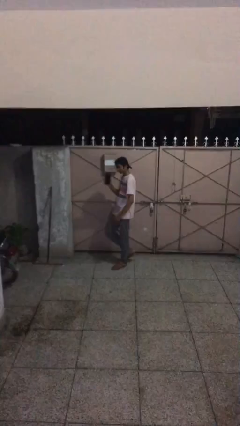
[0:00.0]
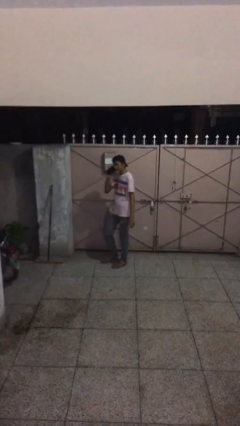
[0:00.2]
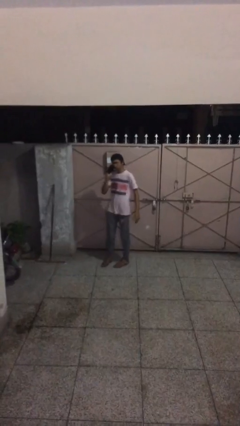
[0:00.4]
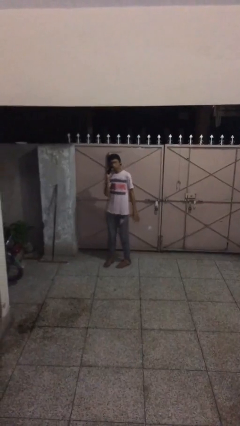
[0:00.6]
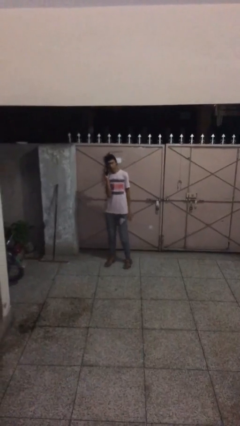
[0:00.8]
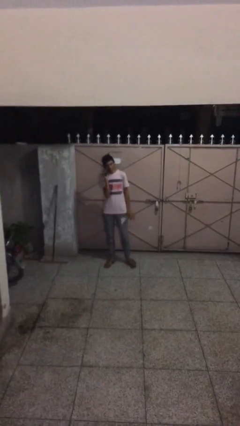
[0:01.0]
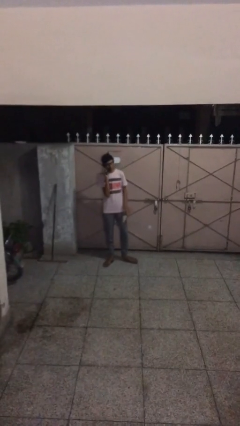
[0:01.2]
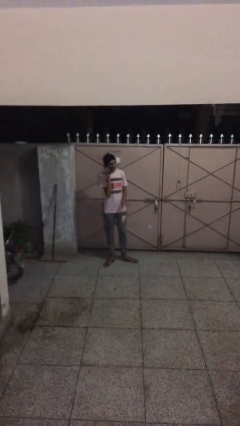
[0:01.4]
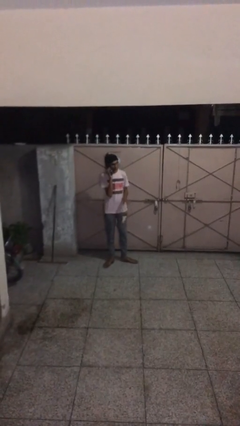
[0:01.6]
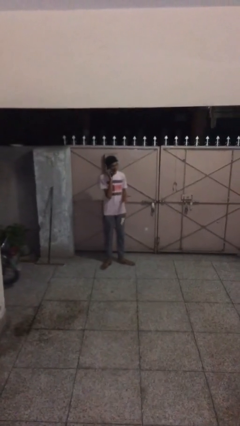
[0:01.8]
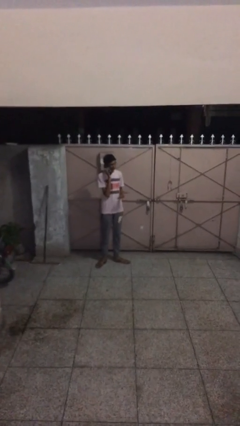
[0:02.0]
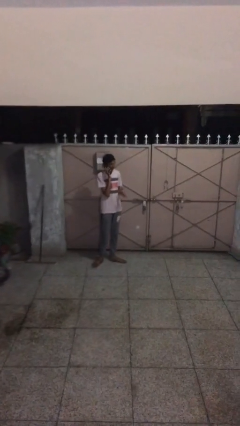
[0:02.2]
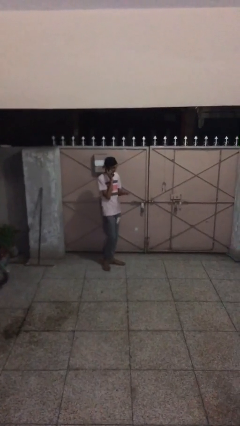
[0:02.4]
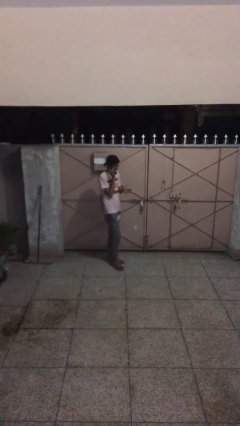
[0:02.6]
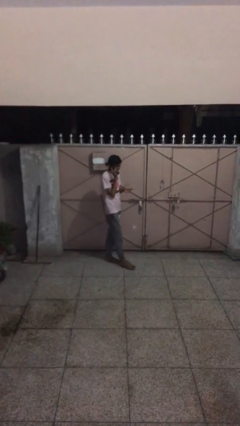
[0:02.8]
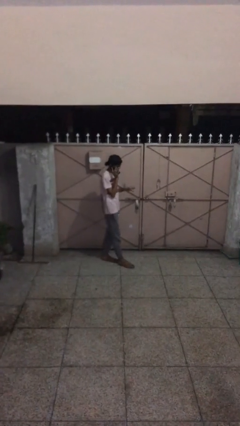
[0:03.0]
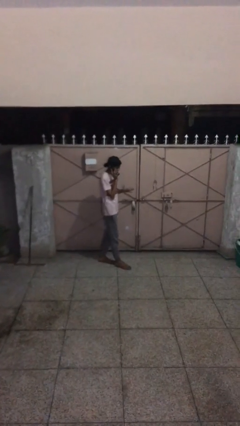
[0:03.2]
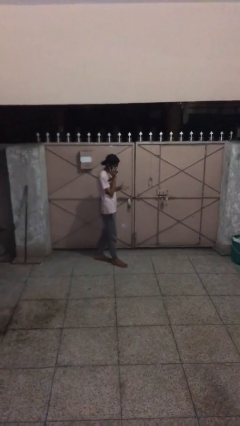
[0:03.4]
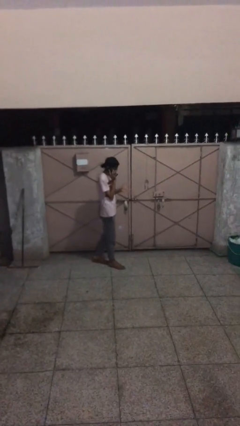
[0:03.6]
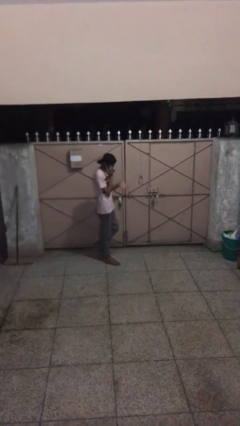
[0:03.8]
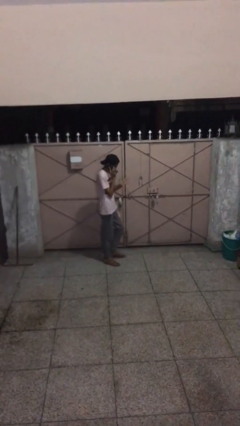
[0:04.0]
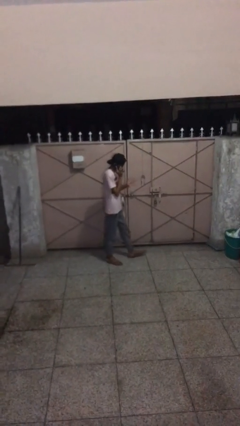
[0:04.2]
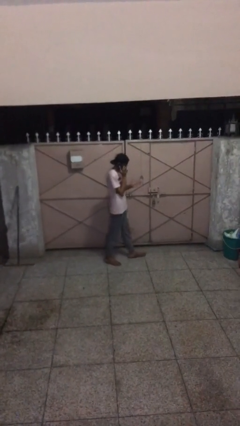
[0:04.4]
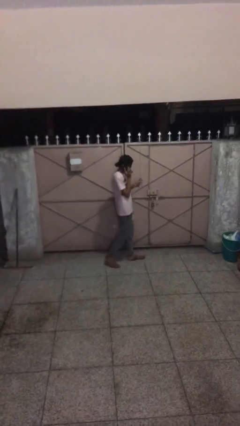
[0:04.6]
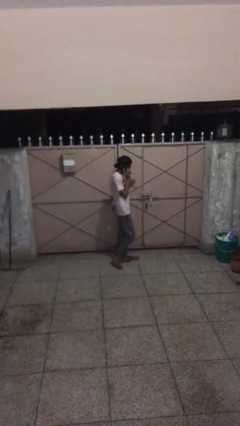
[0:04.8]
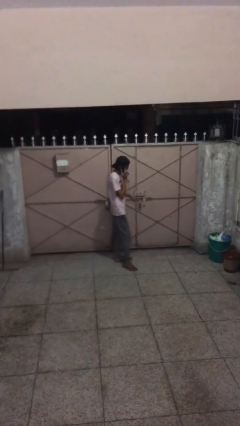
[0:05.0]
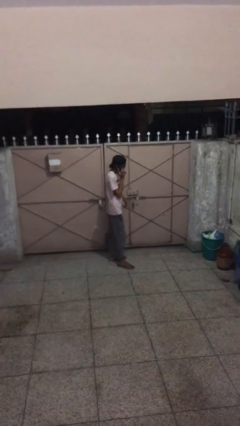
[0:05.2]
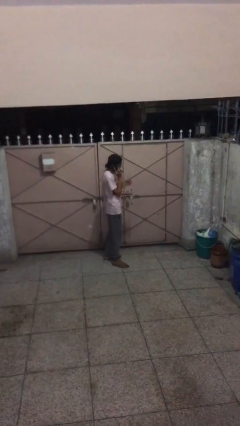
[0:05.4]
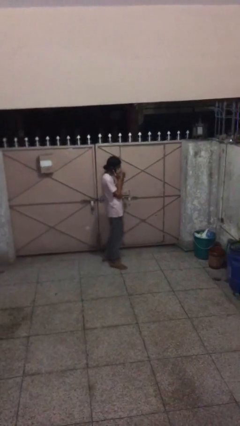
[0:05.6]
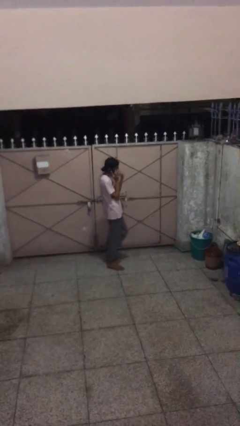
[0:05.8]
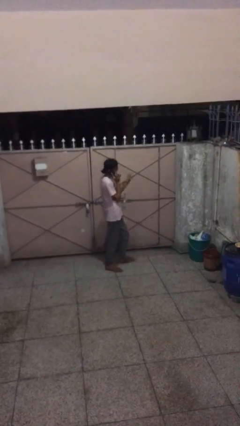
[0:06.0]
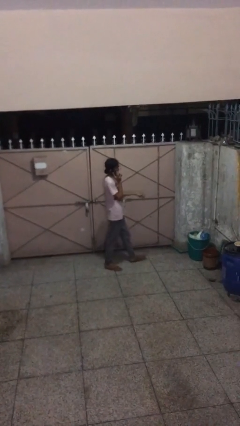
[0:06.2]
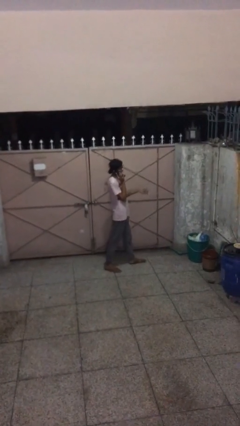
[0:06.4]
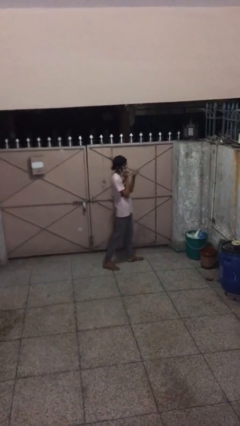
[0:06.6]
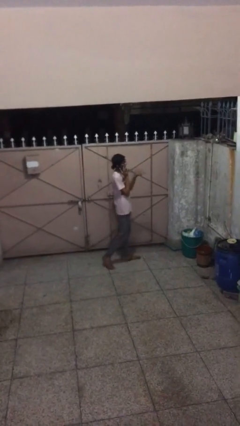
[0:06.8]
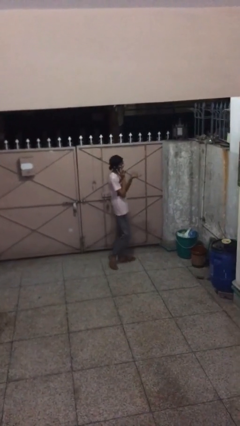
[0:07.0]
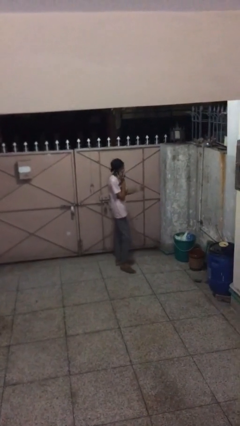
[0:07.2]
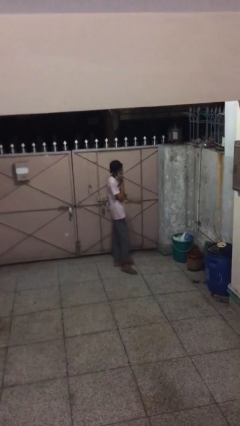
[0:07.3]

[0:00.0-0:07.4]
person talks on phone

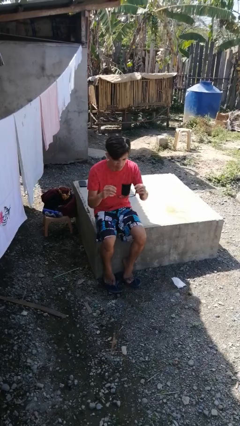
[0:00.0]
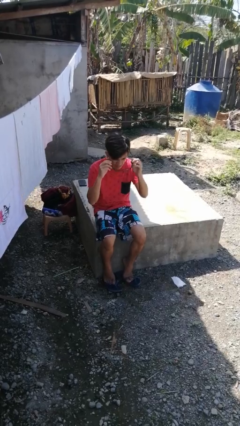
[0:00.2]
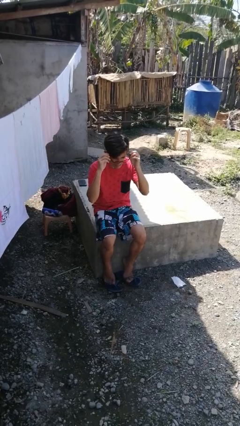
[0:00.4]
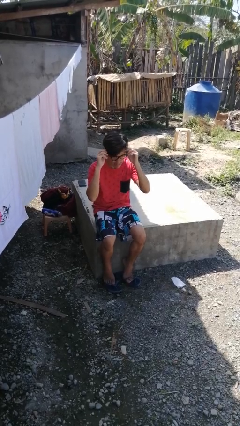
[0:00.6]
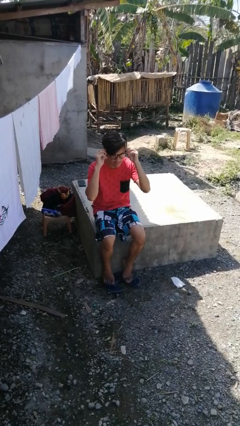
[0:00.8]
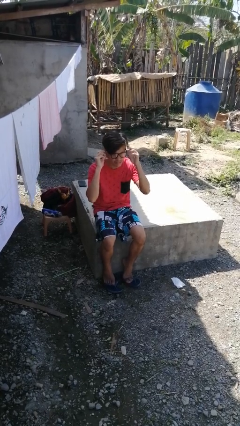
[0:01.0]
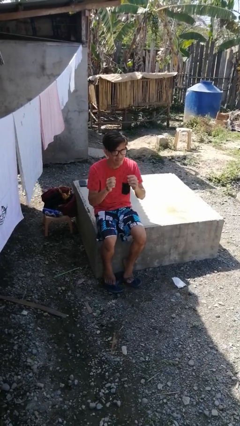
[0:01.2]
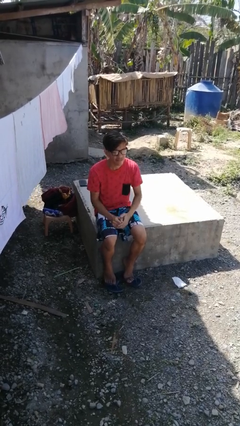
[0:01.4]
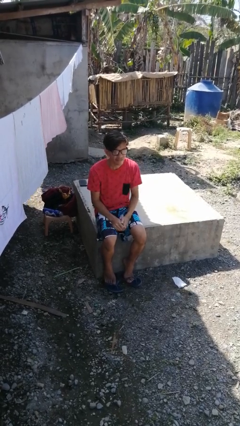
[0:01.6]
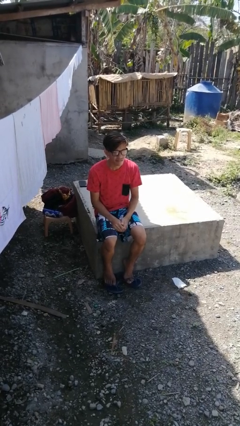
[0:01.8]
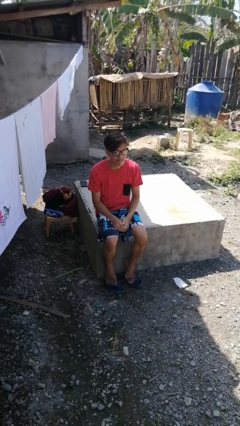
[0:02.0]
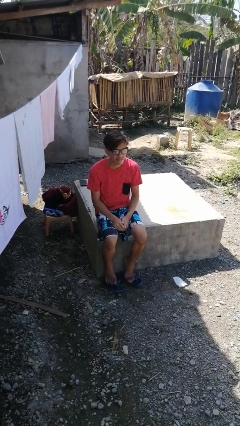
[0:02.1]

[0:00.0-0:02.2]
person puts on glasses

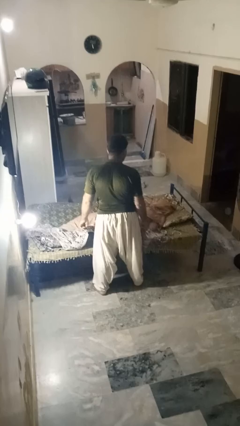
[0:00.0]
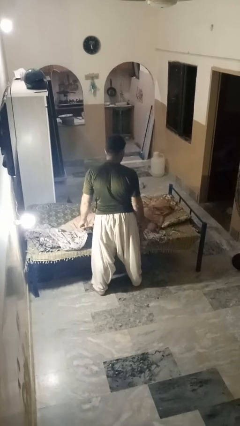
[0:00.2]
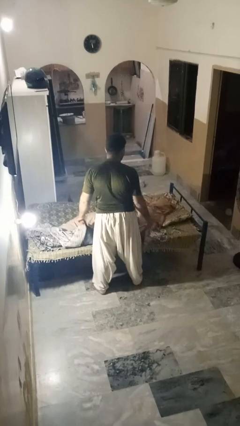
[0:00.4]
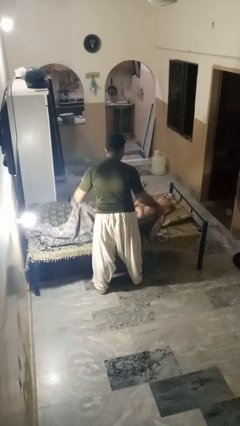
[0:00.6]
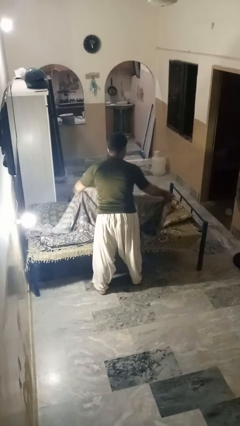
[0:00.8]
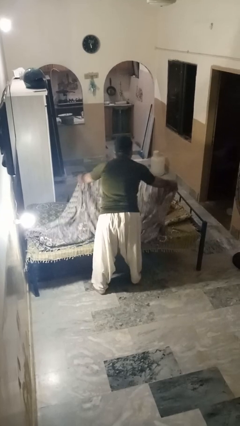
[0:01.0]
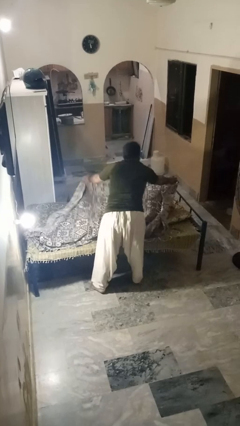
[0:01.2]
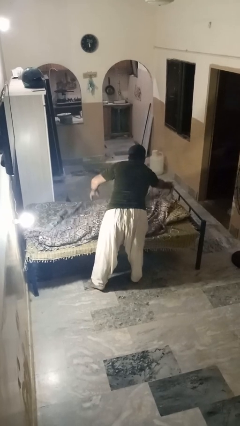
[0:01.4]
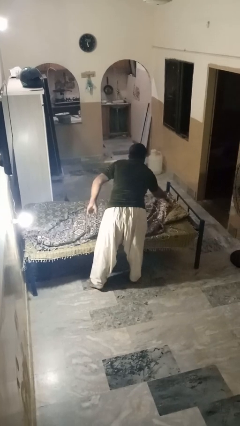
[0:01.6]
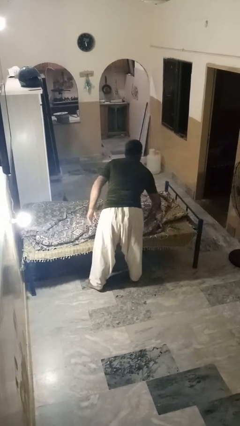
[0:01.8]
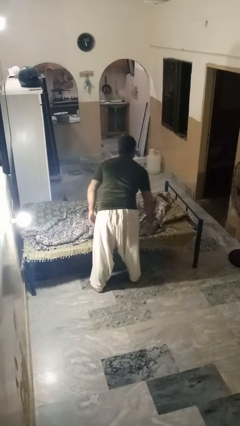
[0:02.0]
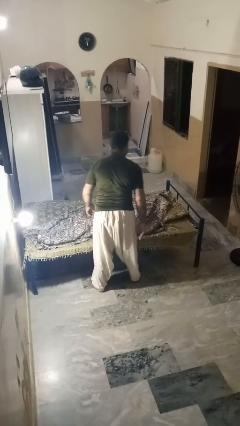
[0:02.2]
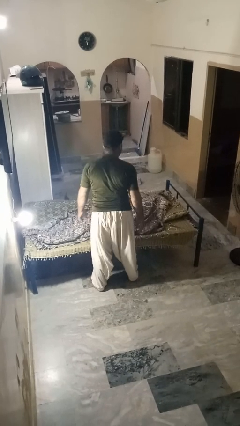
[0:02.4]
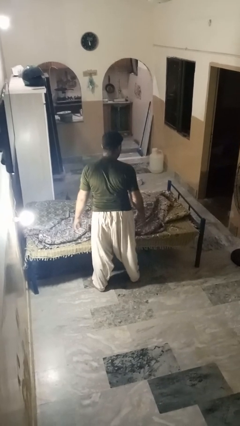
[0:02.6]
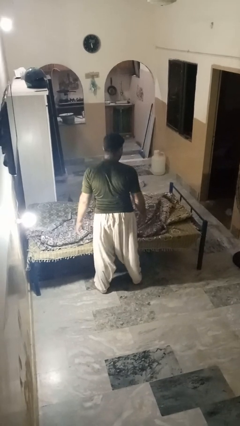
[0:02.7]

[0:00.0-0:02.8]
person covers friend with blanket

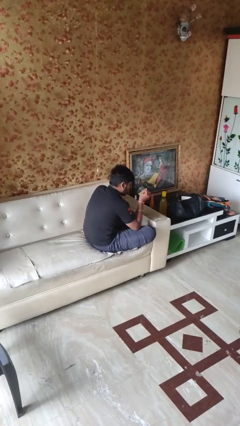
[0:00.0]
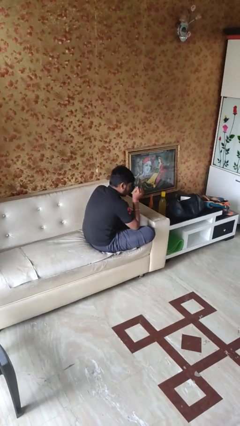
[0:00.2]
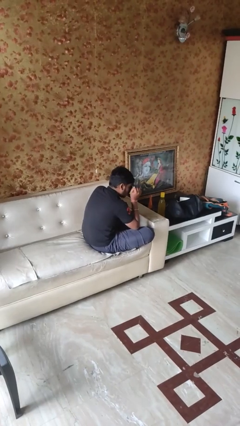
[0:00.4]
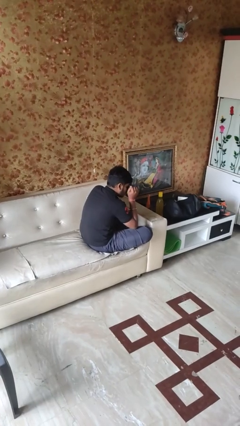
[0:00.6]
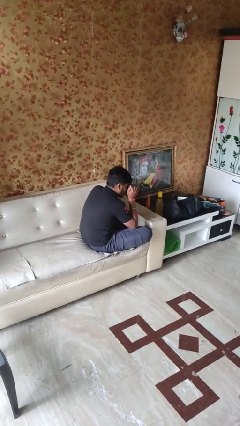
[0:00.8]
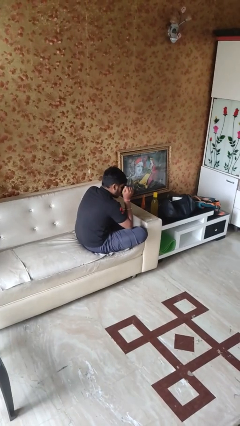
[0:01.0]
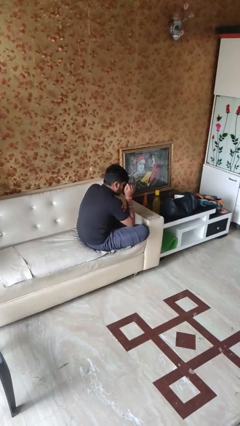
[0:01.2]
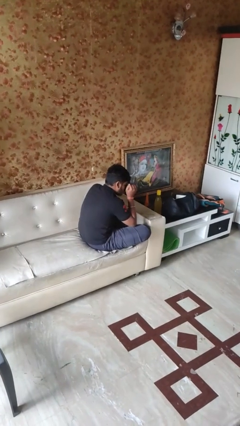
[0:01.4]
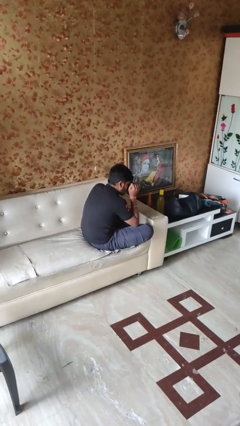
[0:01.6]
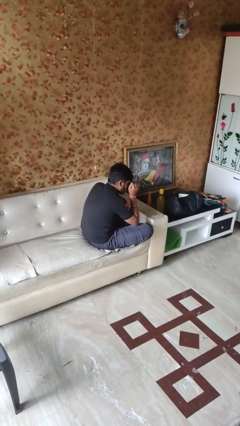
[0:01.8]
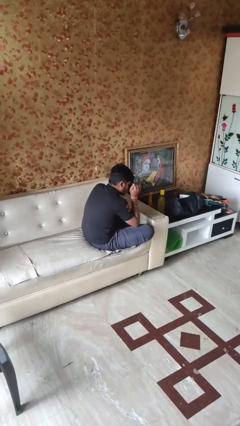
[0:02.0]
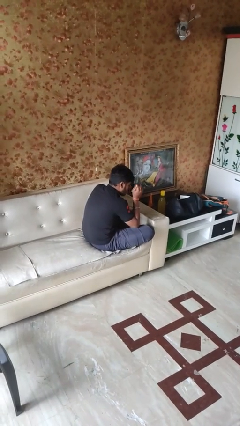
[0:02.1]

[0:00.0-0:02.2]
person drinks from mug

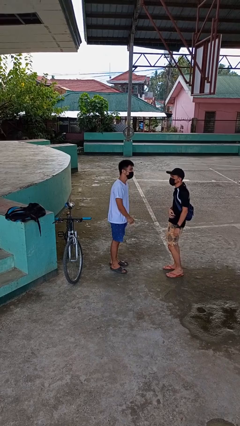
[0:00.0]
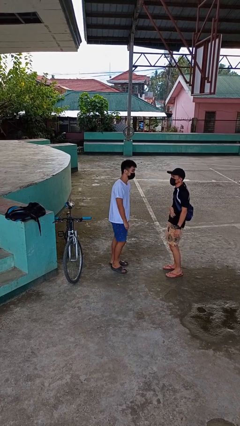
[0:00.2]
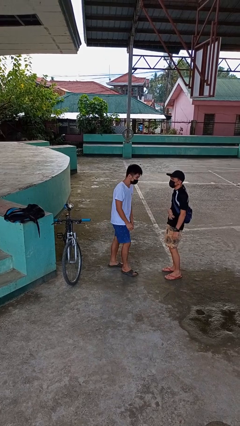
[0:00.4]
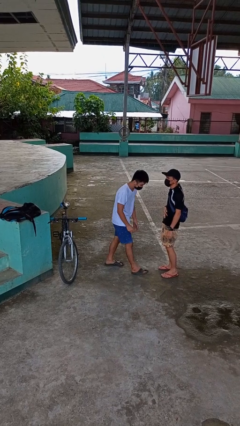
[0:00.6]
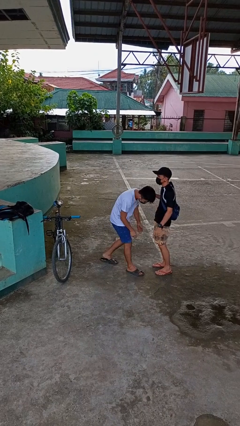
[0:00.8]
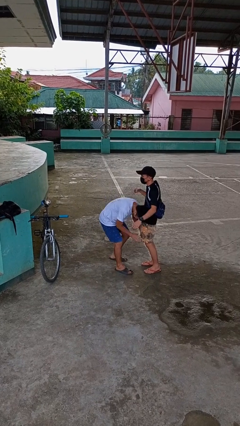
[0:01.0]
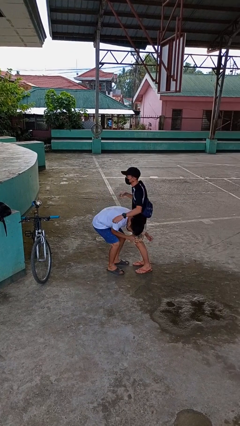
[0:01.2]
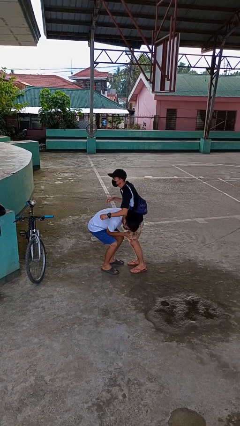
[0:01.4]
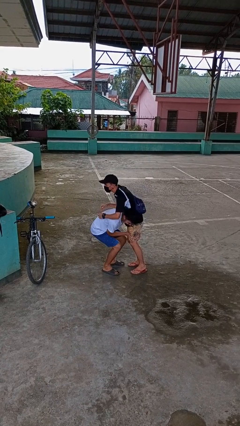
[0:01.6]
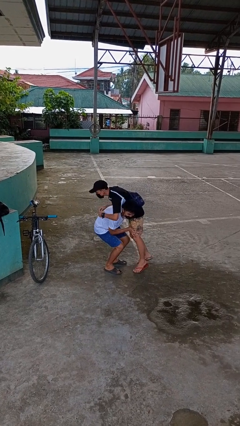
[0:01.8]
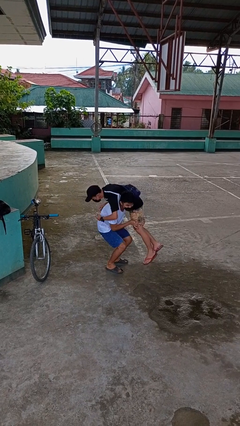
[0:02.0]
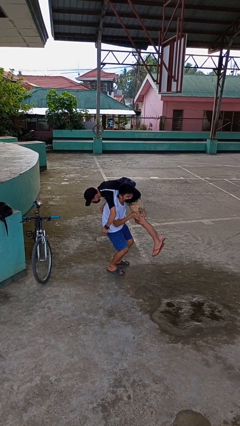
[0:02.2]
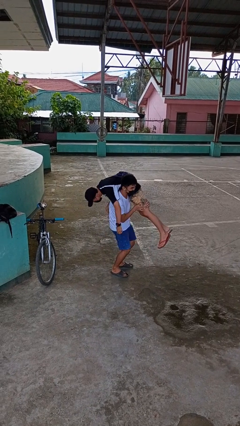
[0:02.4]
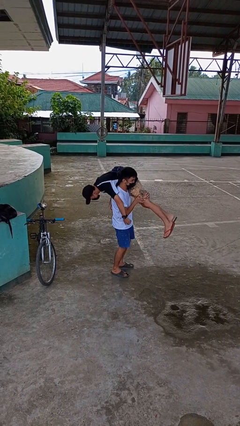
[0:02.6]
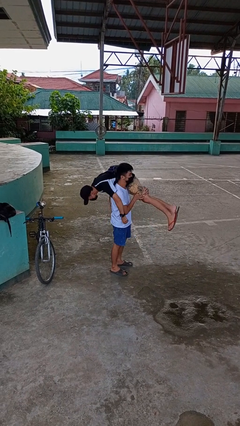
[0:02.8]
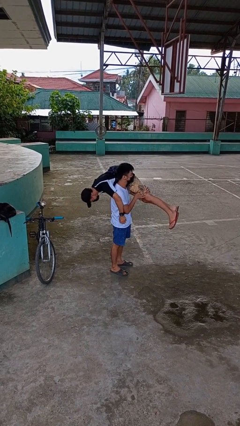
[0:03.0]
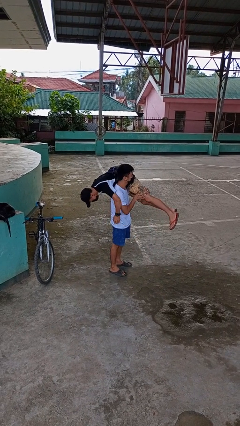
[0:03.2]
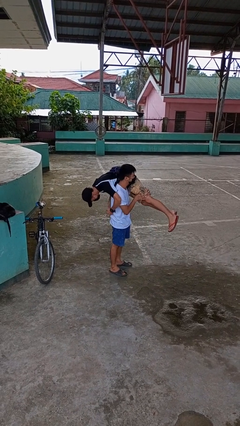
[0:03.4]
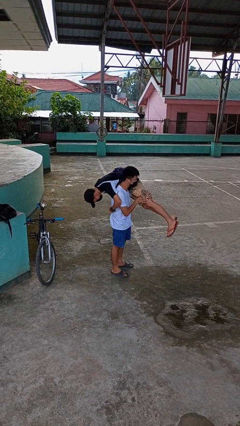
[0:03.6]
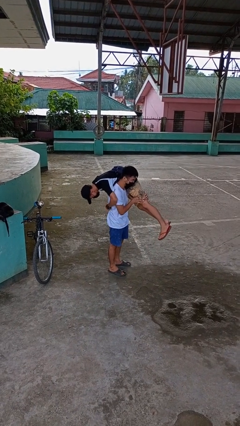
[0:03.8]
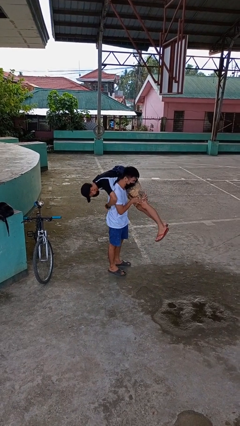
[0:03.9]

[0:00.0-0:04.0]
person carries person over shoulder
